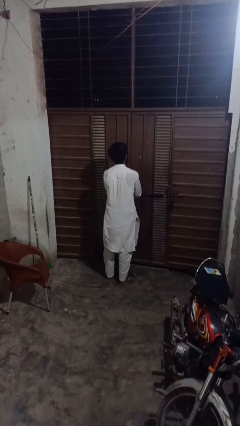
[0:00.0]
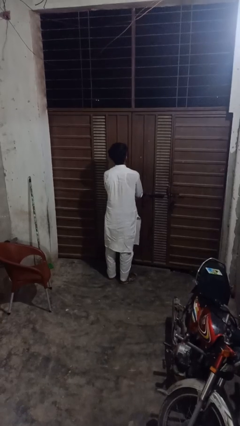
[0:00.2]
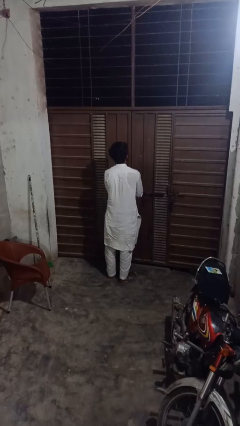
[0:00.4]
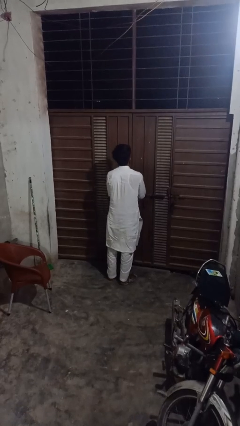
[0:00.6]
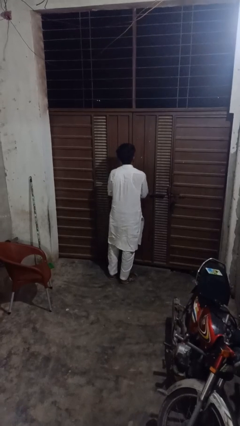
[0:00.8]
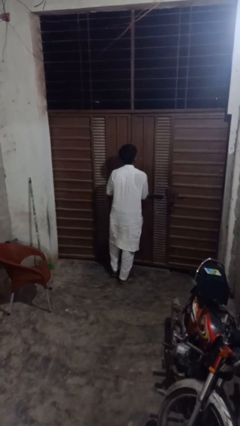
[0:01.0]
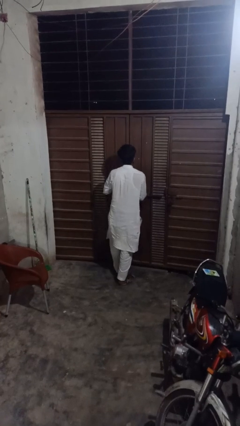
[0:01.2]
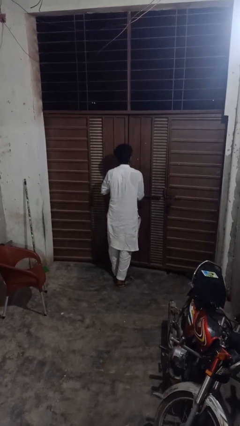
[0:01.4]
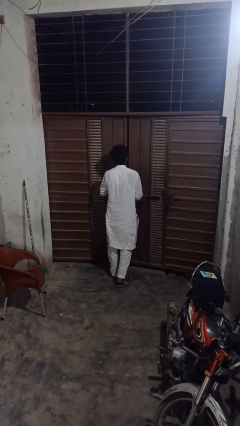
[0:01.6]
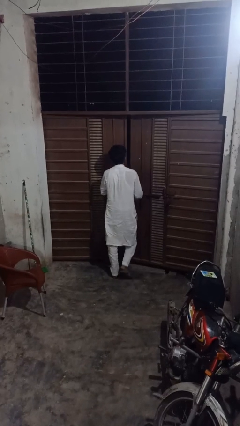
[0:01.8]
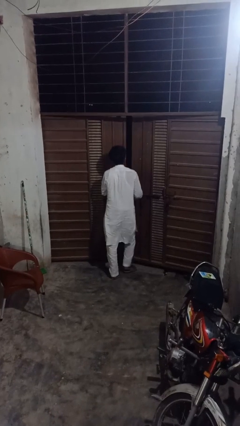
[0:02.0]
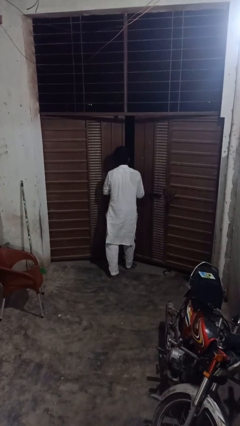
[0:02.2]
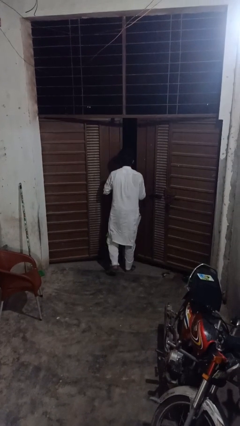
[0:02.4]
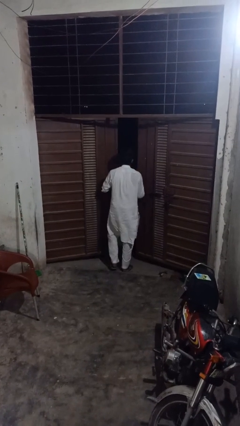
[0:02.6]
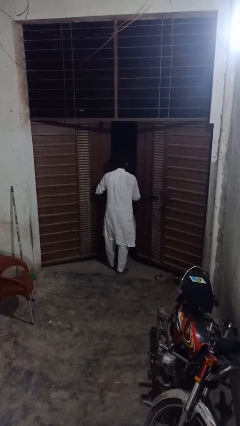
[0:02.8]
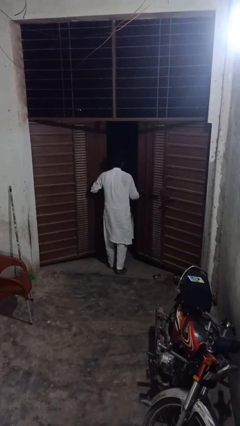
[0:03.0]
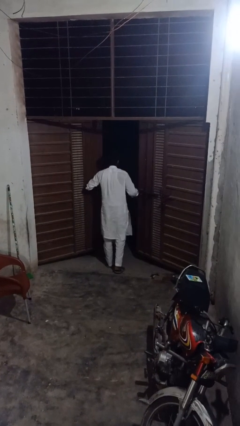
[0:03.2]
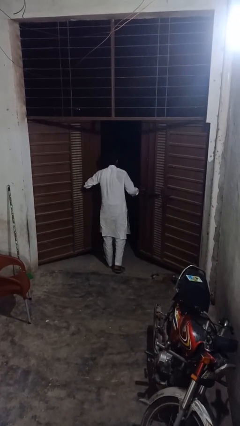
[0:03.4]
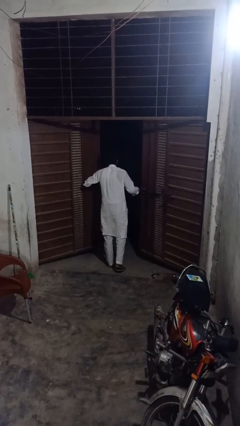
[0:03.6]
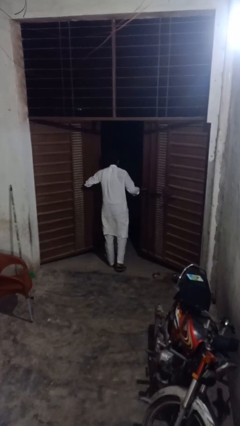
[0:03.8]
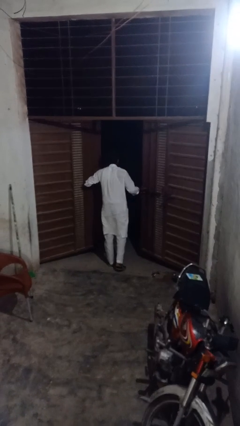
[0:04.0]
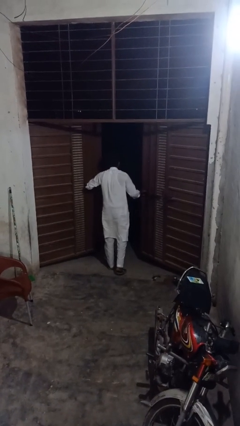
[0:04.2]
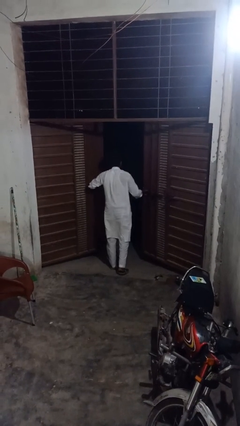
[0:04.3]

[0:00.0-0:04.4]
person opens gate

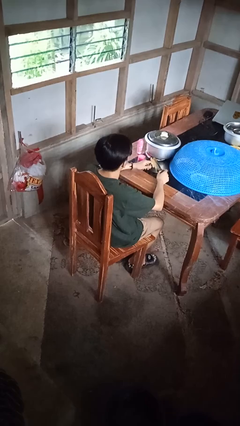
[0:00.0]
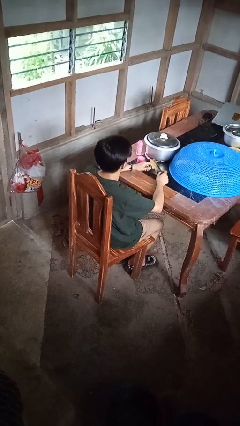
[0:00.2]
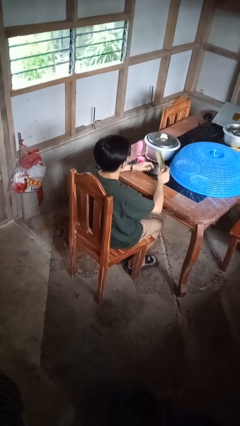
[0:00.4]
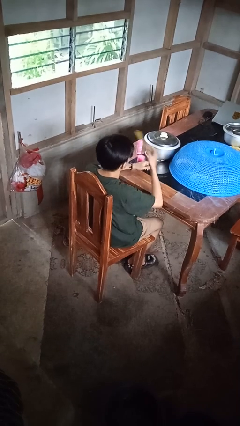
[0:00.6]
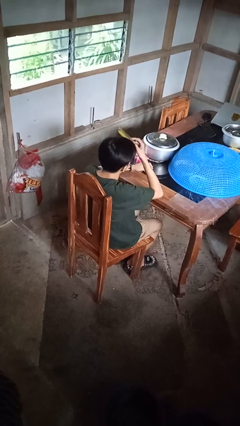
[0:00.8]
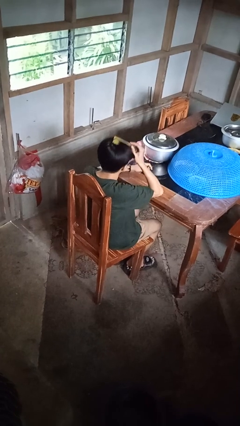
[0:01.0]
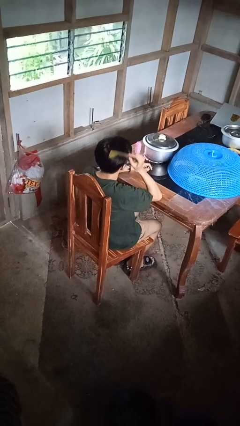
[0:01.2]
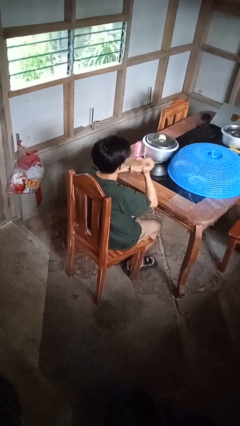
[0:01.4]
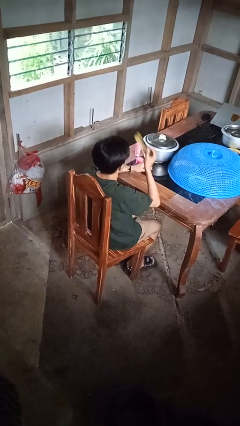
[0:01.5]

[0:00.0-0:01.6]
person brushes hair

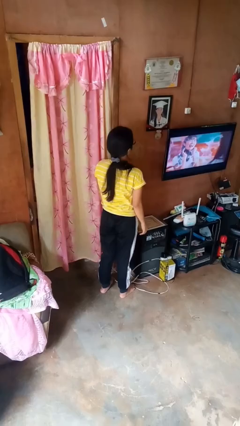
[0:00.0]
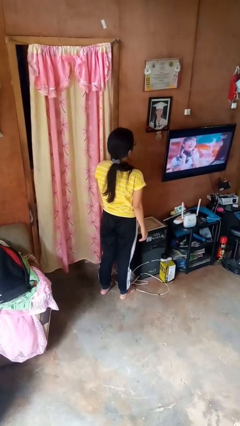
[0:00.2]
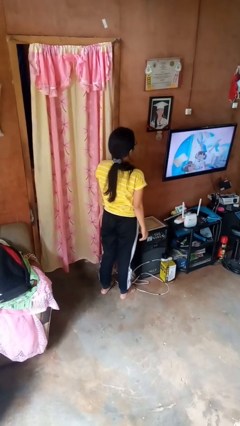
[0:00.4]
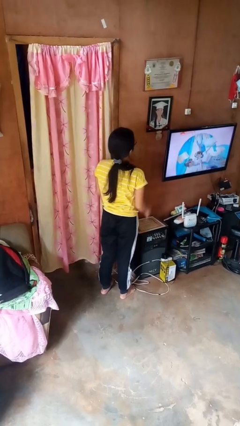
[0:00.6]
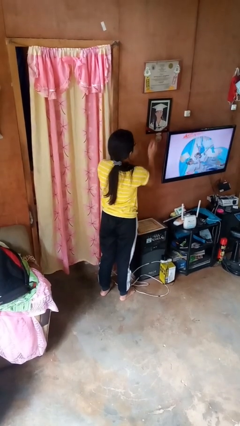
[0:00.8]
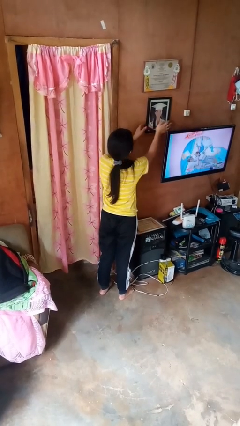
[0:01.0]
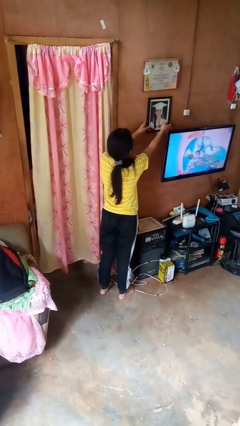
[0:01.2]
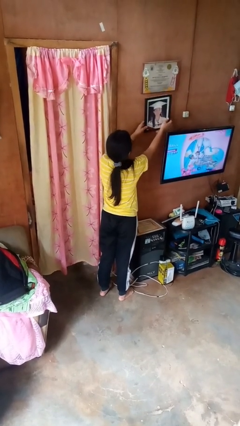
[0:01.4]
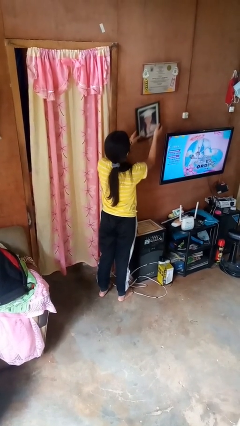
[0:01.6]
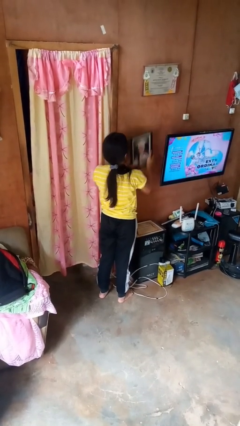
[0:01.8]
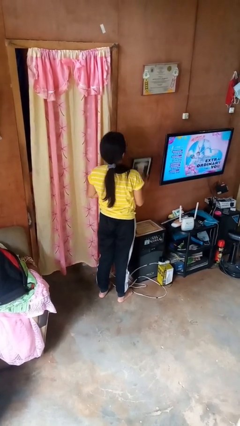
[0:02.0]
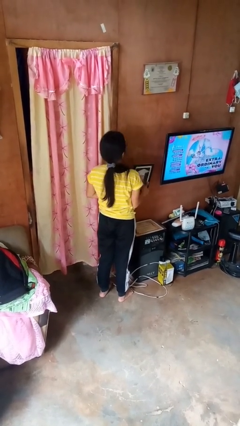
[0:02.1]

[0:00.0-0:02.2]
person takes down picture frame

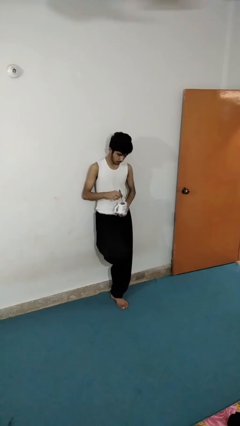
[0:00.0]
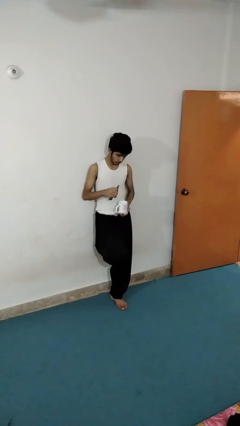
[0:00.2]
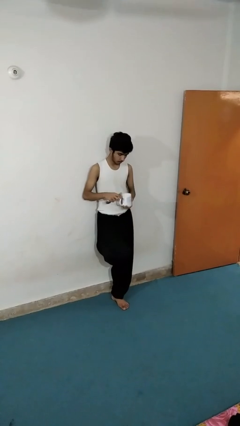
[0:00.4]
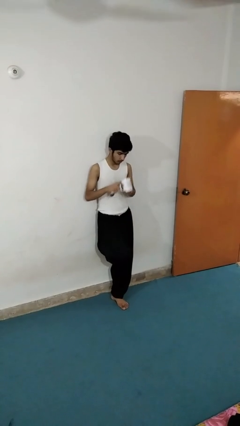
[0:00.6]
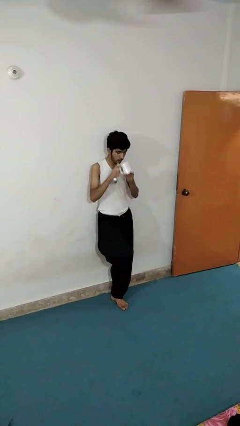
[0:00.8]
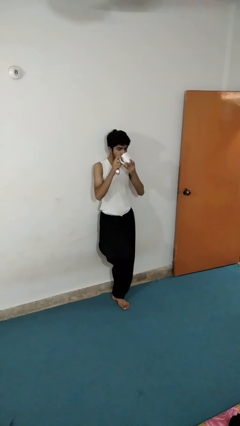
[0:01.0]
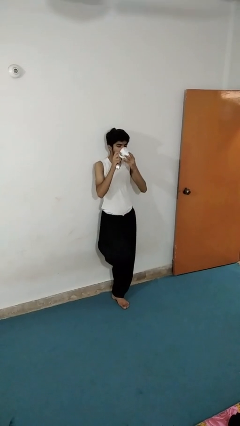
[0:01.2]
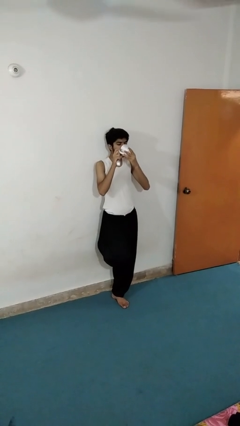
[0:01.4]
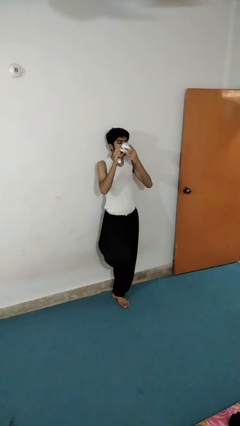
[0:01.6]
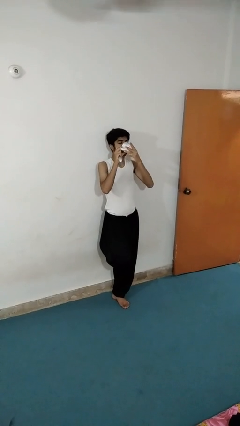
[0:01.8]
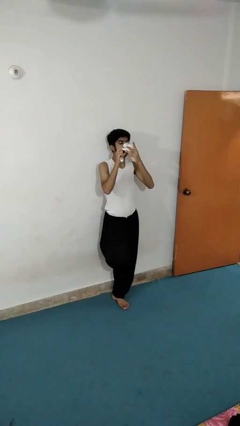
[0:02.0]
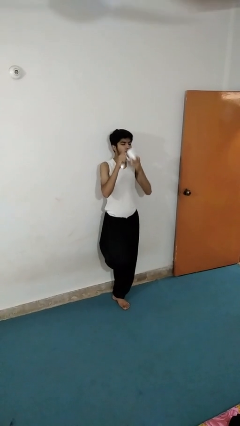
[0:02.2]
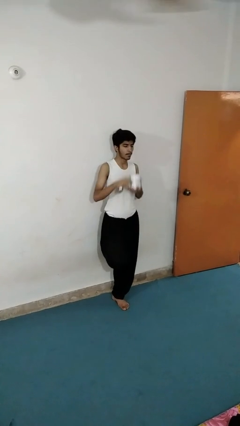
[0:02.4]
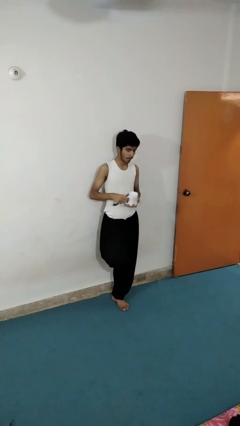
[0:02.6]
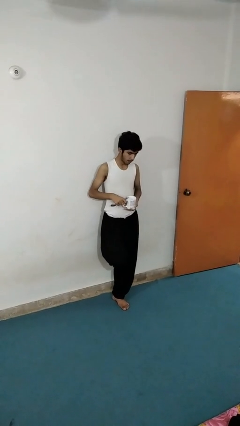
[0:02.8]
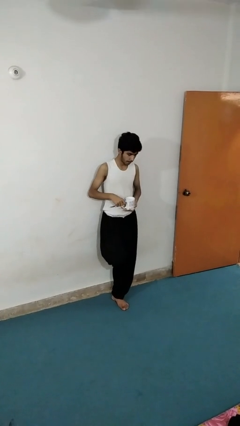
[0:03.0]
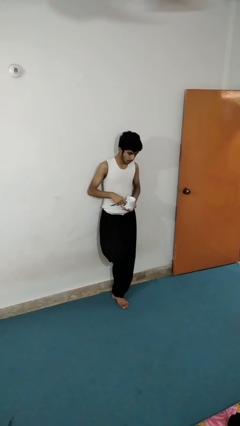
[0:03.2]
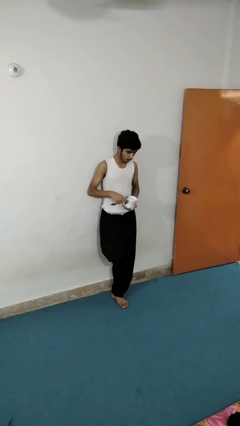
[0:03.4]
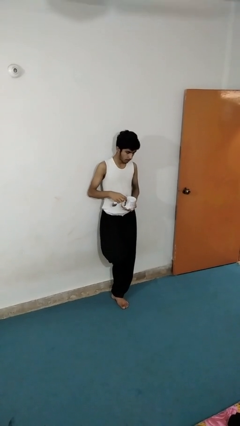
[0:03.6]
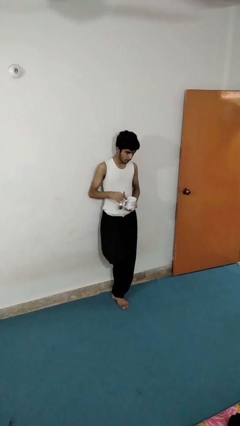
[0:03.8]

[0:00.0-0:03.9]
person drinks from mug

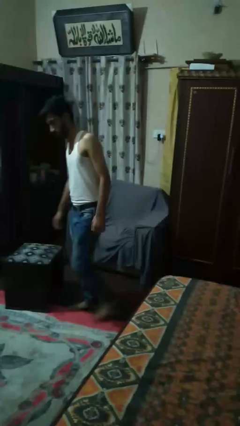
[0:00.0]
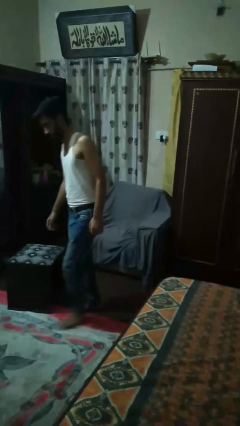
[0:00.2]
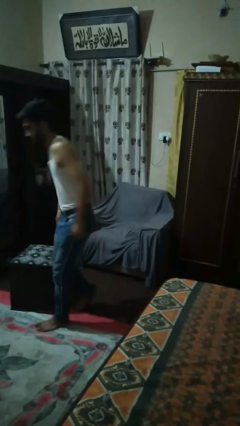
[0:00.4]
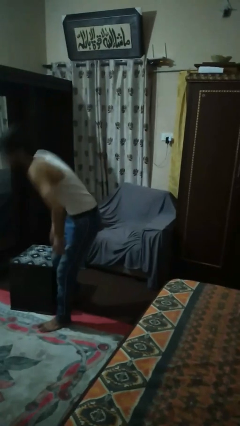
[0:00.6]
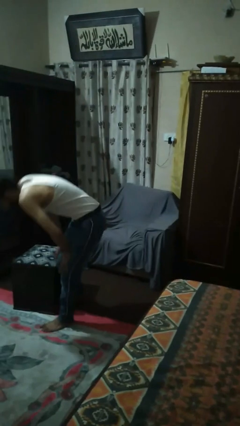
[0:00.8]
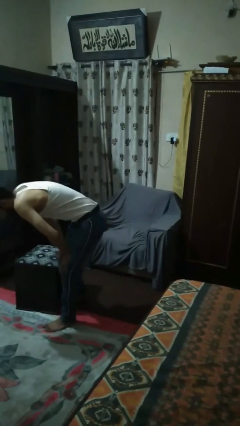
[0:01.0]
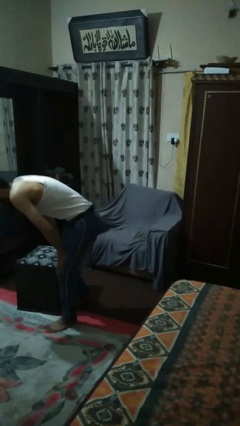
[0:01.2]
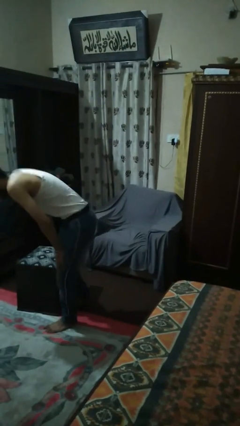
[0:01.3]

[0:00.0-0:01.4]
person bumps into table

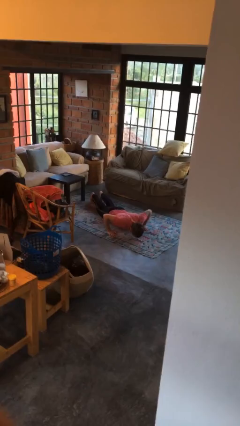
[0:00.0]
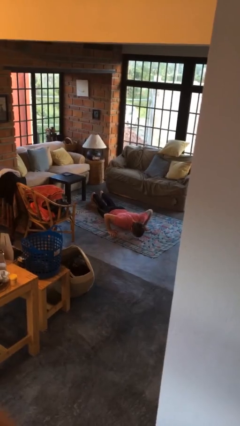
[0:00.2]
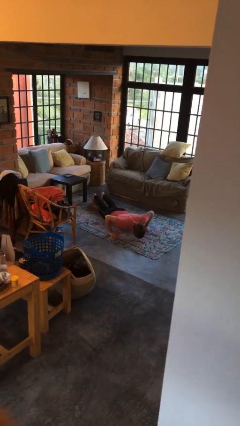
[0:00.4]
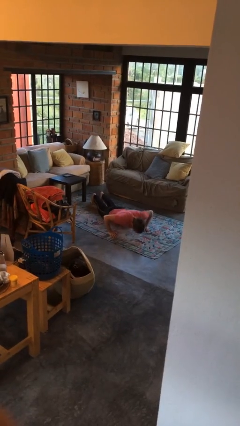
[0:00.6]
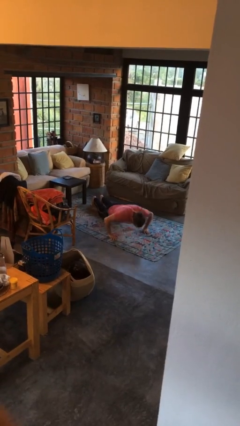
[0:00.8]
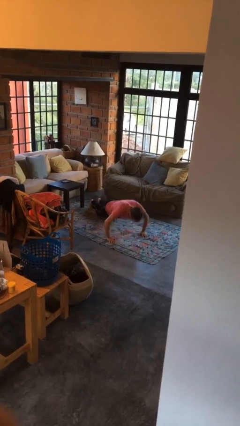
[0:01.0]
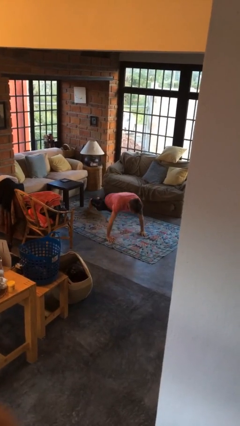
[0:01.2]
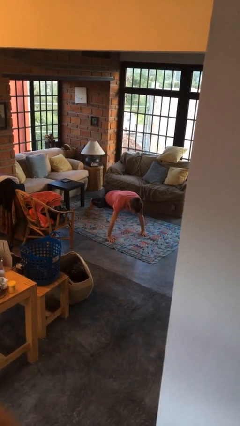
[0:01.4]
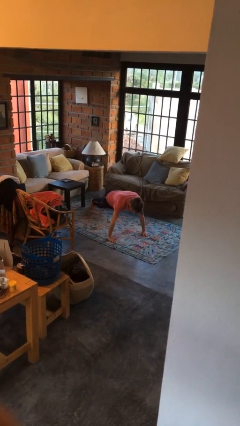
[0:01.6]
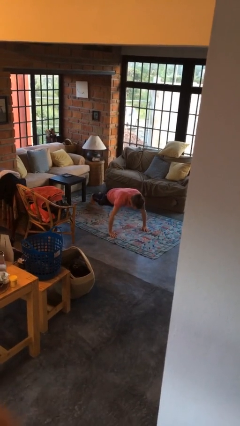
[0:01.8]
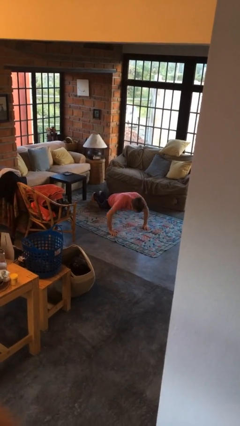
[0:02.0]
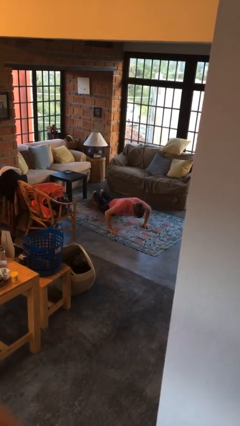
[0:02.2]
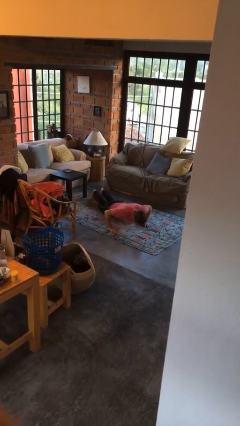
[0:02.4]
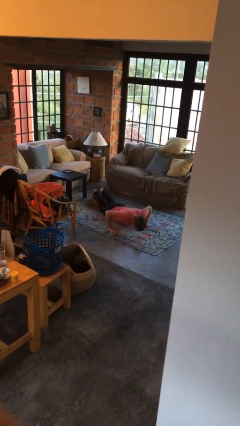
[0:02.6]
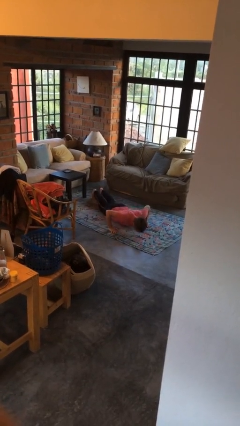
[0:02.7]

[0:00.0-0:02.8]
person exercises with pushup

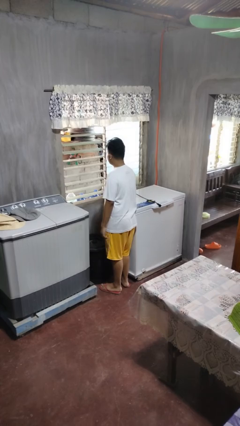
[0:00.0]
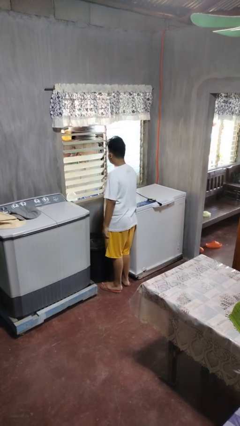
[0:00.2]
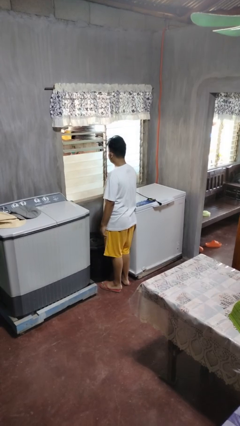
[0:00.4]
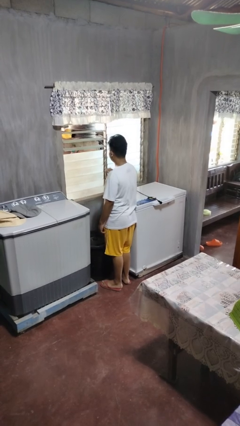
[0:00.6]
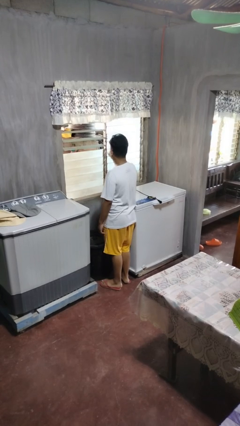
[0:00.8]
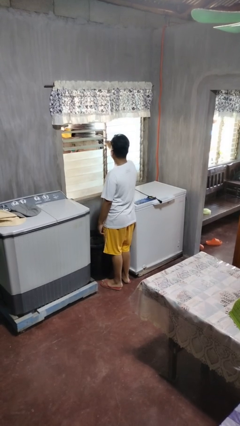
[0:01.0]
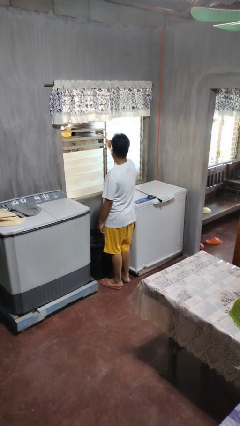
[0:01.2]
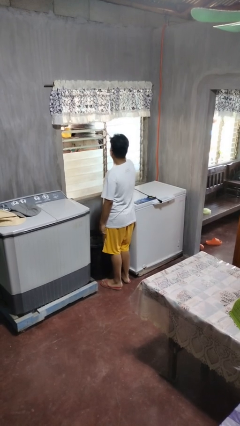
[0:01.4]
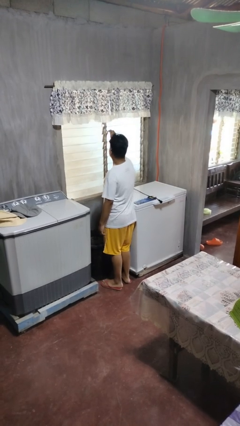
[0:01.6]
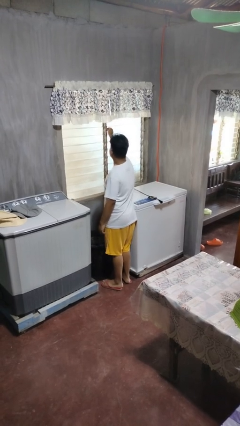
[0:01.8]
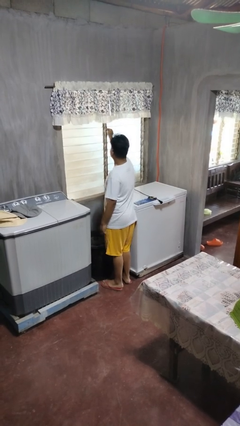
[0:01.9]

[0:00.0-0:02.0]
person closes home window
